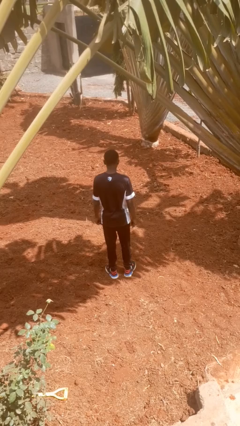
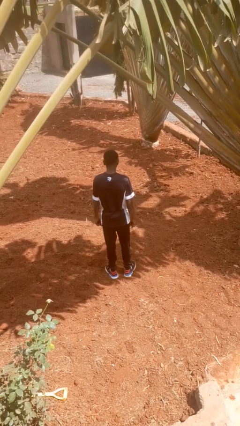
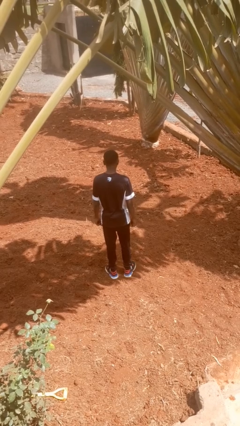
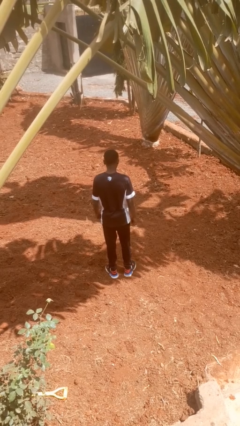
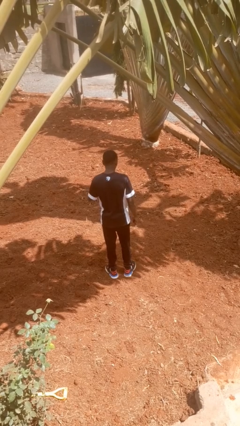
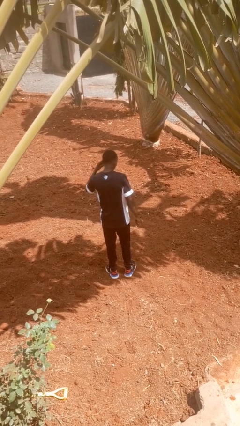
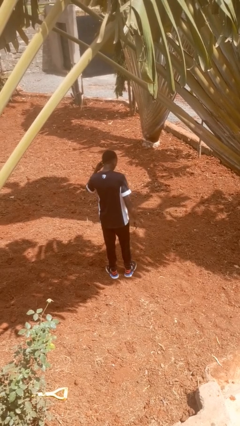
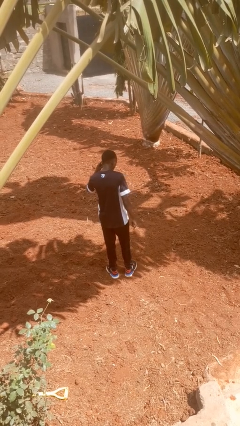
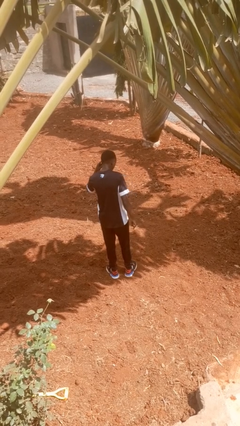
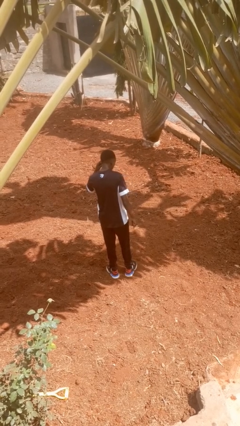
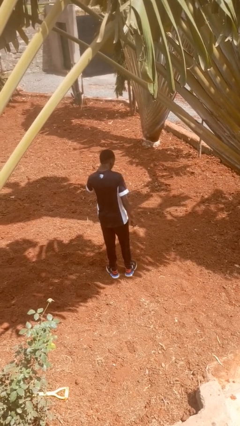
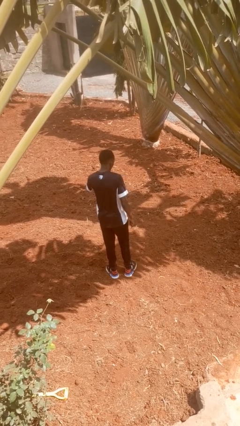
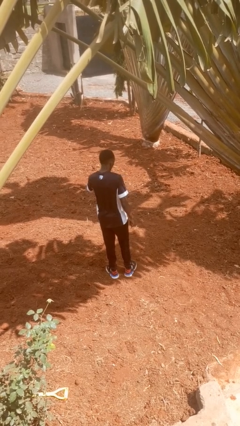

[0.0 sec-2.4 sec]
person gestures listen closely

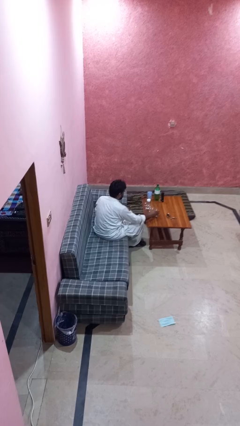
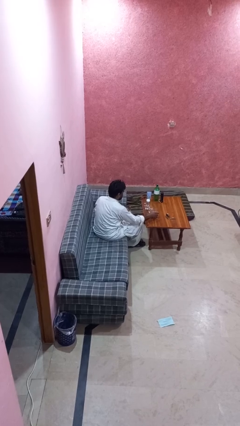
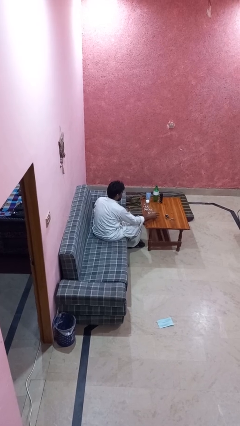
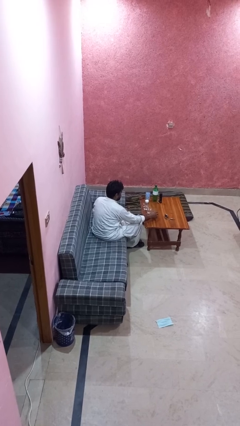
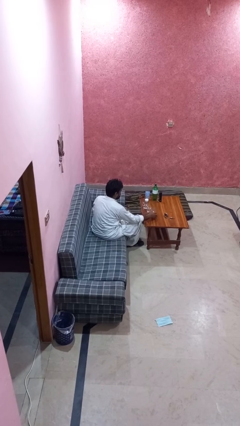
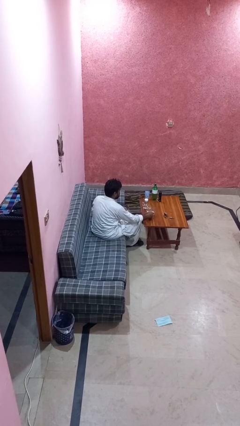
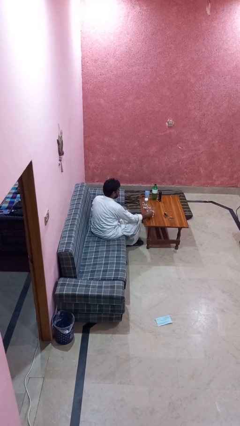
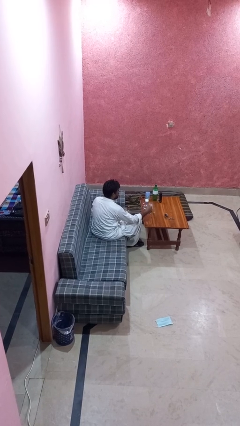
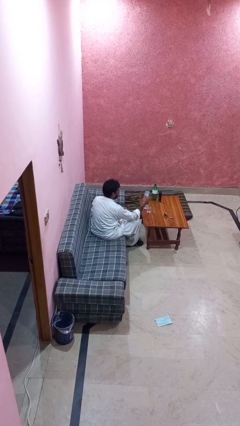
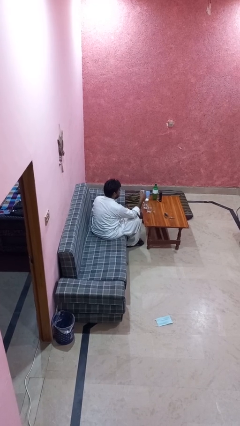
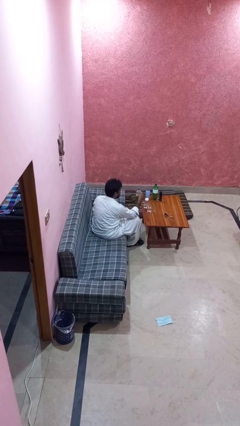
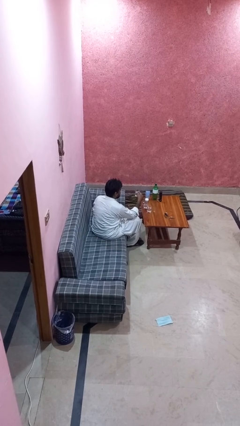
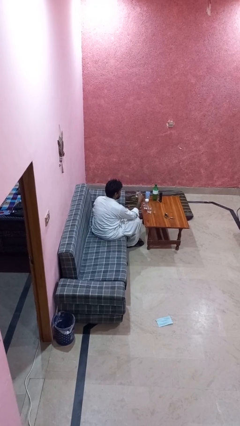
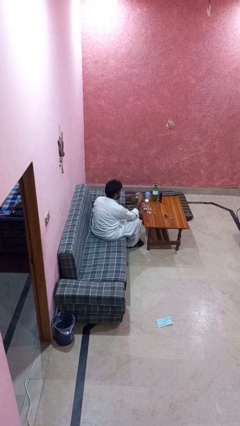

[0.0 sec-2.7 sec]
person picks up object from table

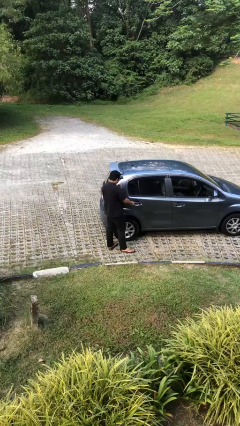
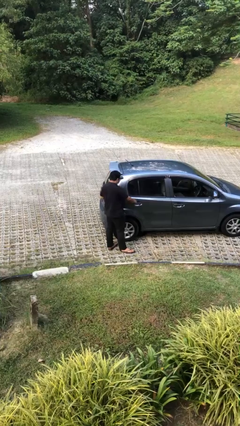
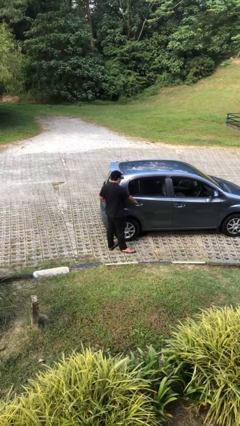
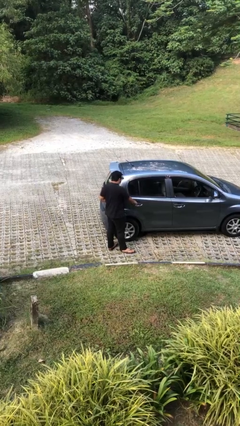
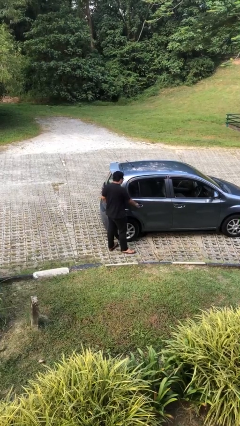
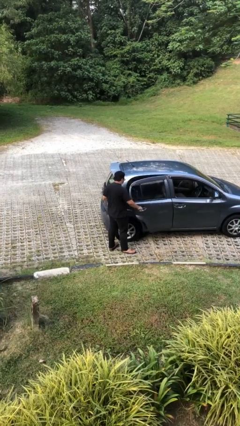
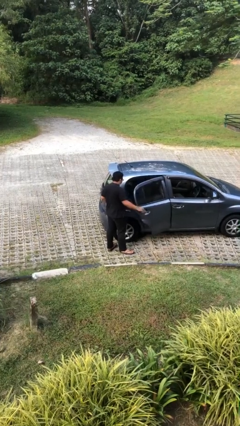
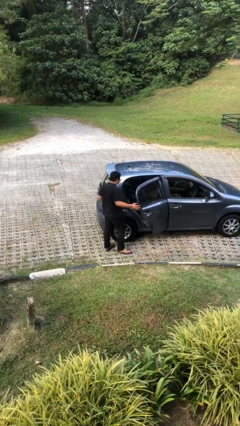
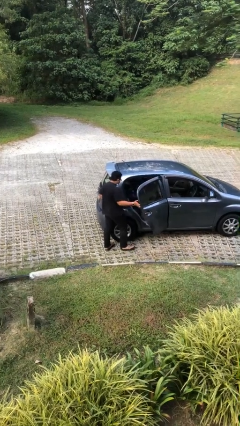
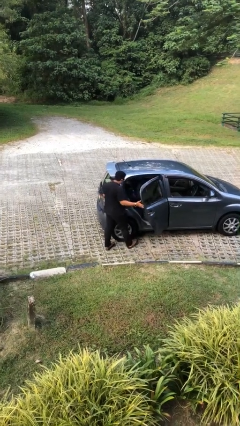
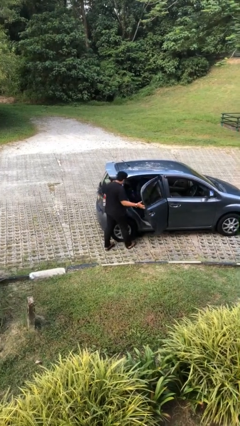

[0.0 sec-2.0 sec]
person opens car door

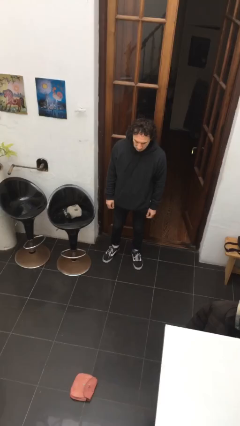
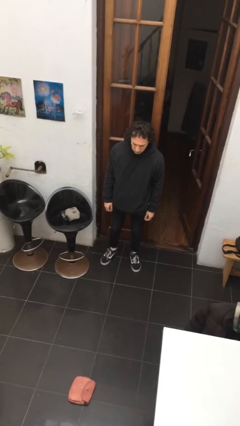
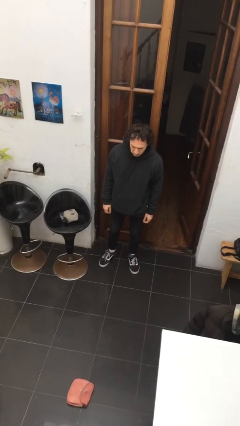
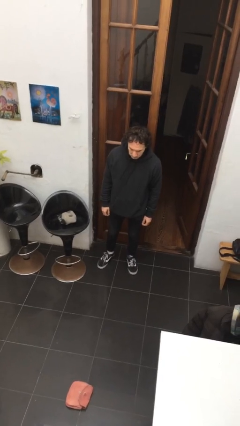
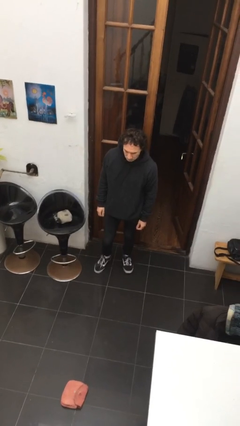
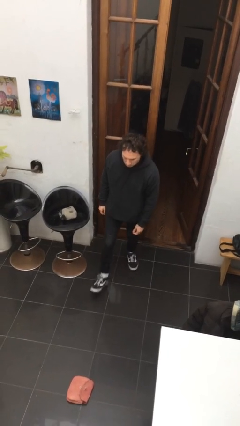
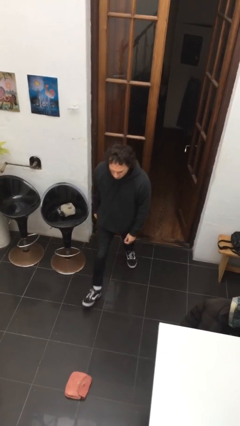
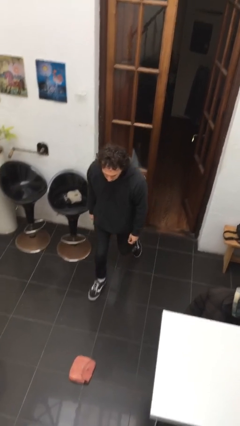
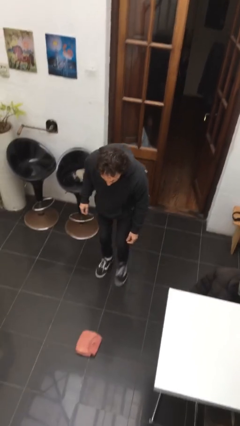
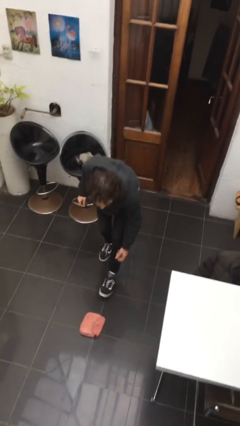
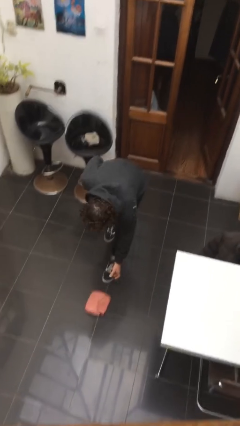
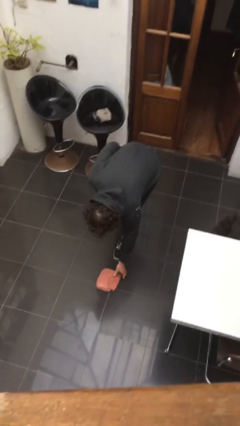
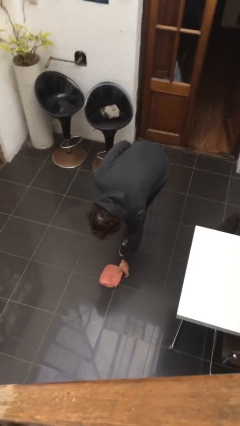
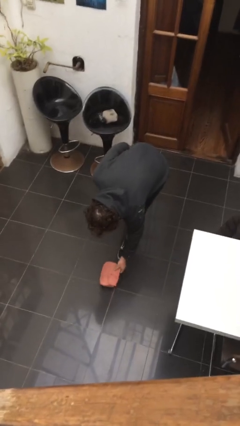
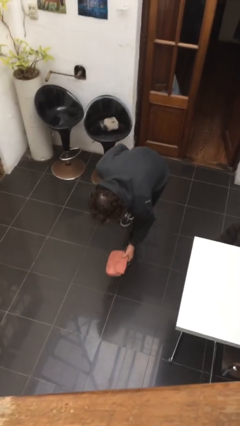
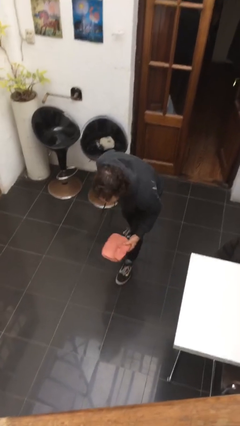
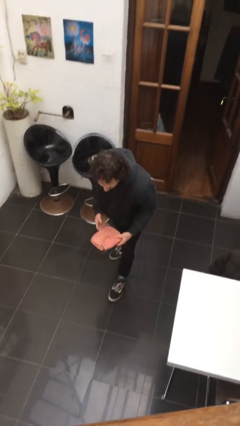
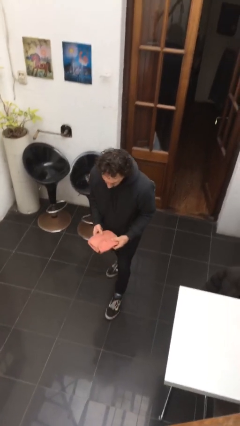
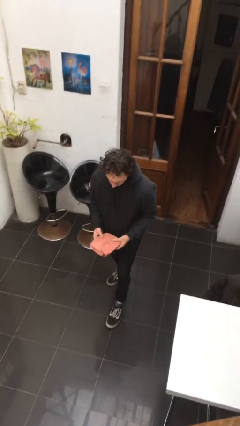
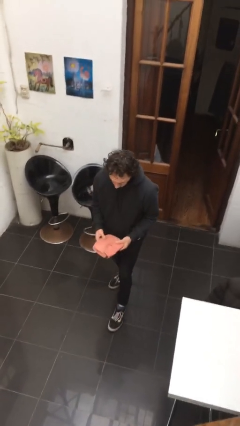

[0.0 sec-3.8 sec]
person picks up object from floor

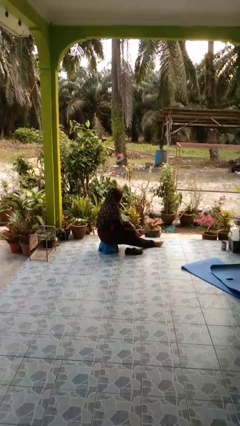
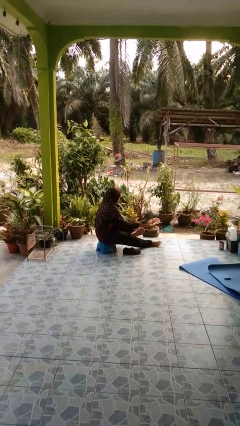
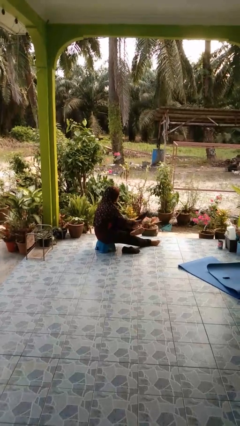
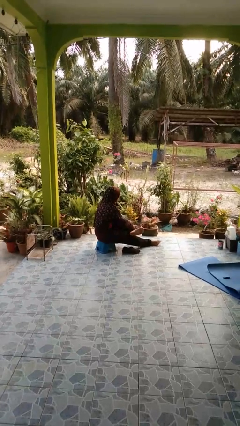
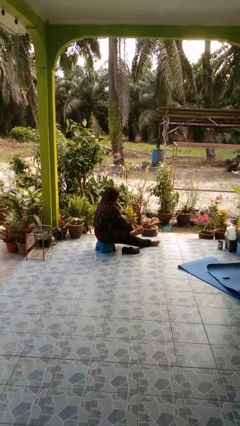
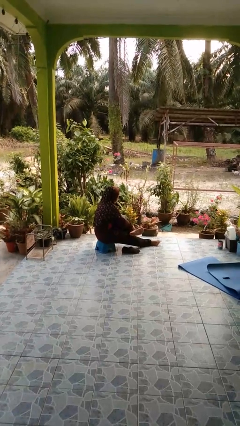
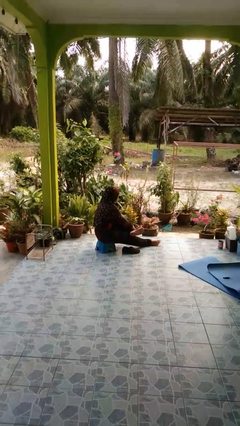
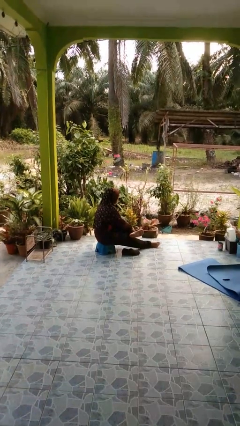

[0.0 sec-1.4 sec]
person takes off shoes

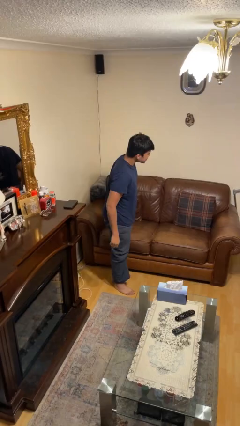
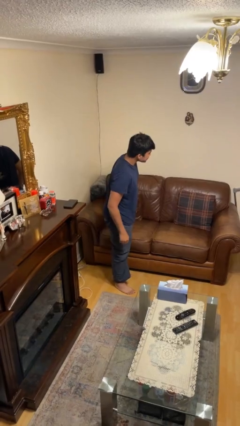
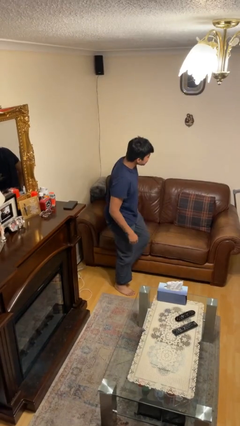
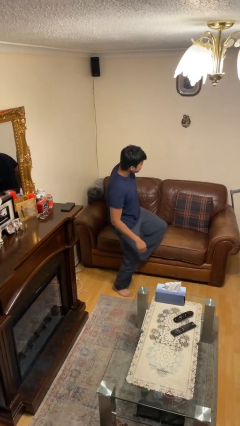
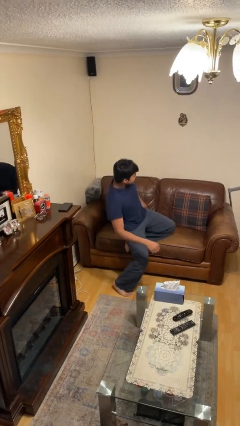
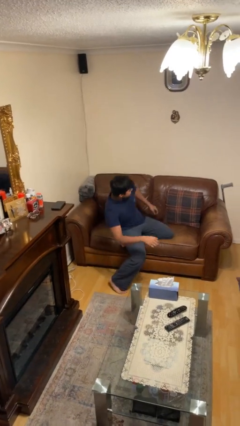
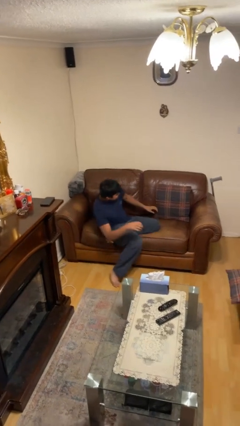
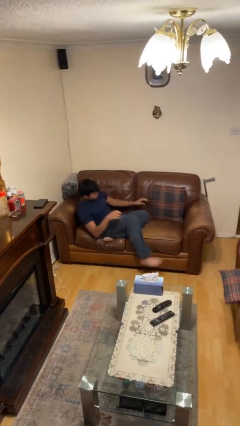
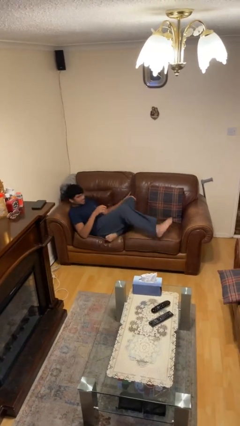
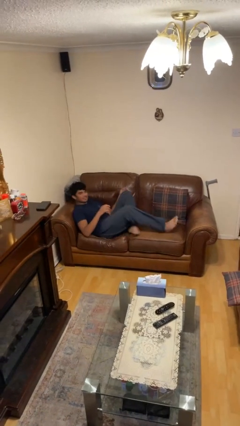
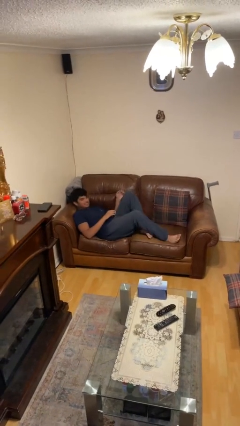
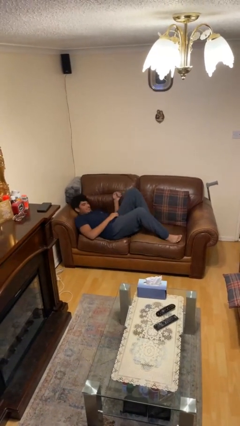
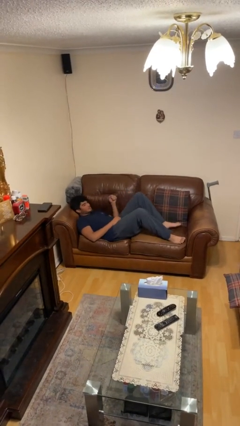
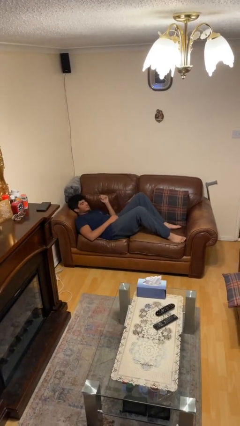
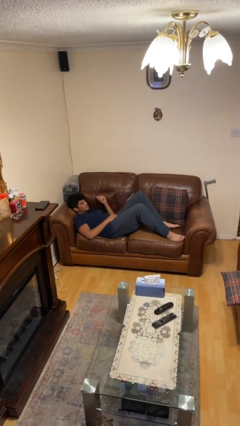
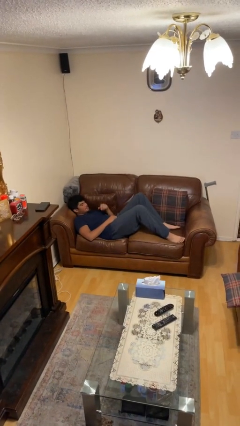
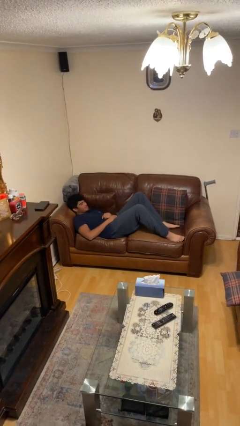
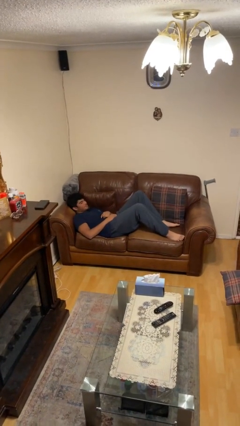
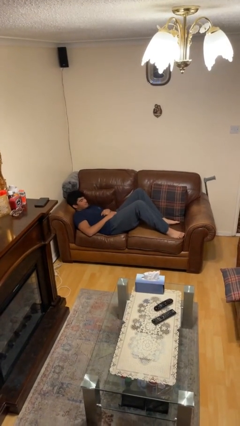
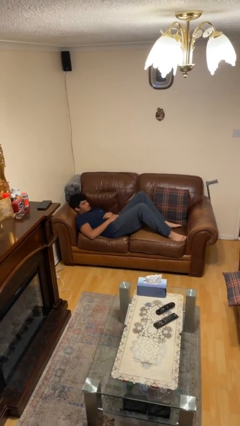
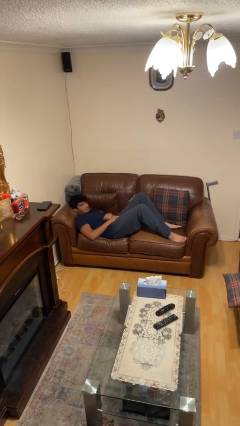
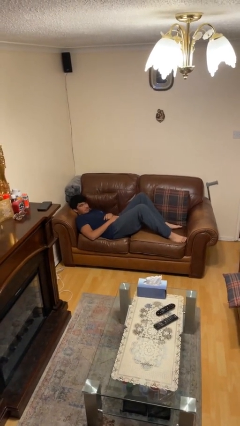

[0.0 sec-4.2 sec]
person lies down on couch

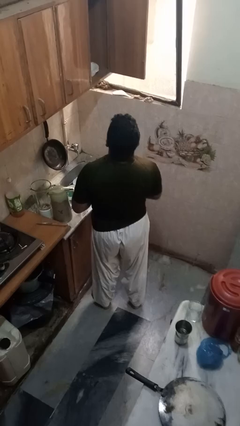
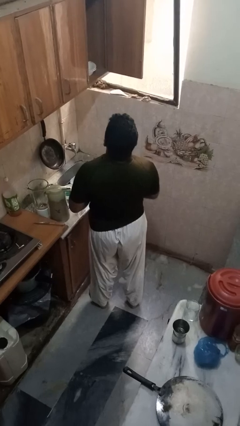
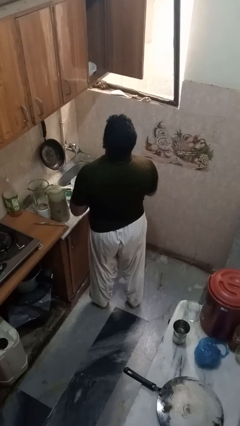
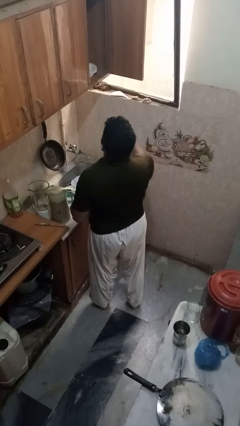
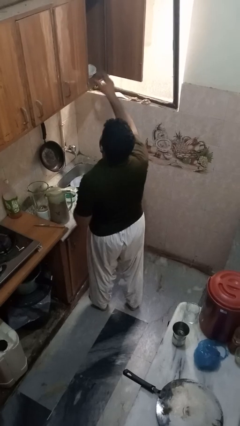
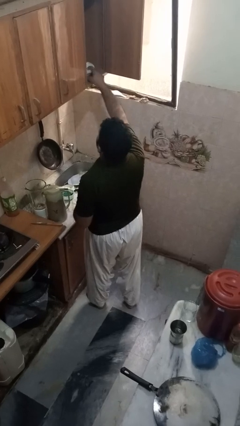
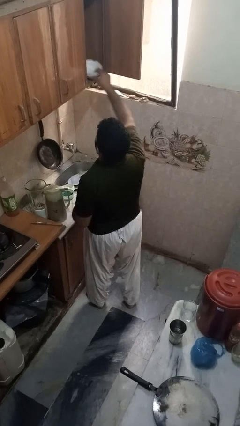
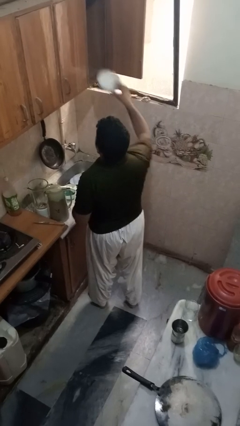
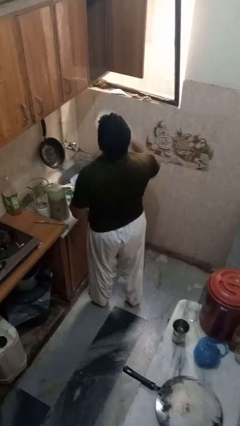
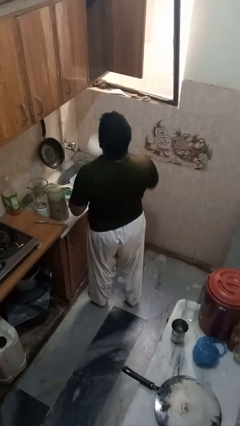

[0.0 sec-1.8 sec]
person takes object from cabinet
